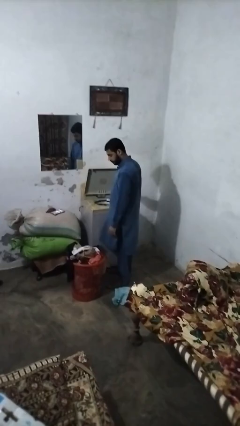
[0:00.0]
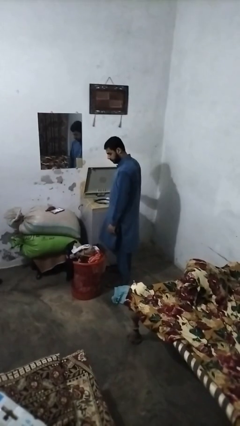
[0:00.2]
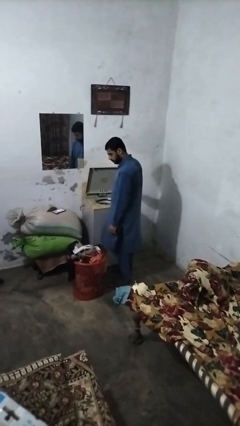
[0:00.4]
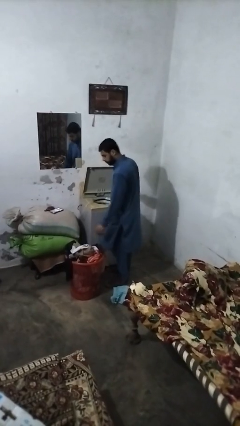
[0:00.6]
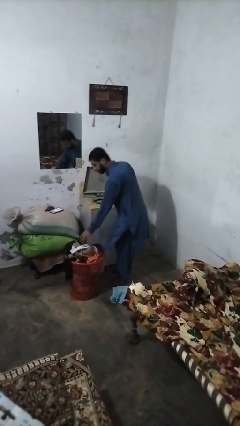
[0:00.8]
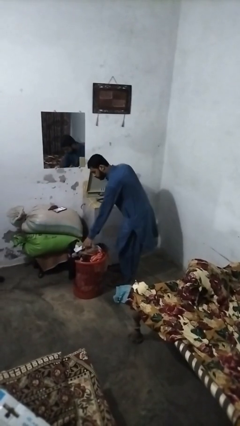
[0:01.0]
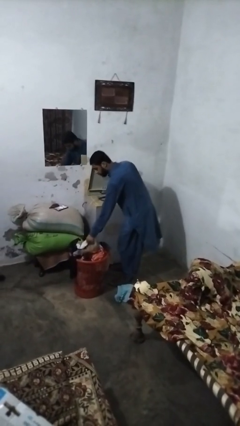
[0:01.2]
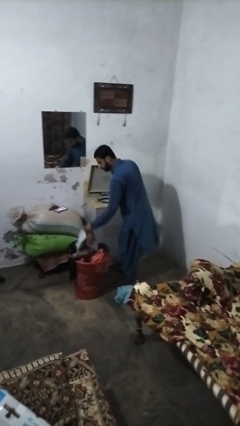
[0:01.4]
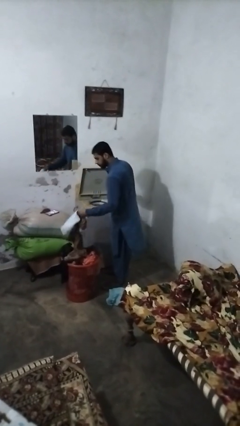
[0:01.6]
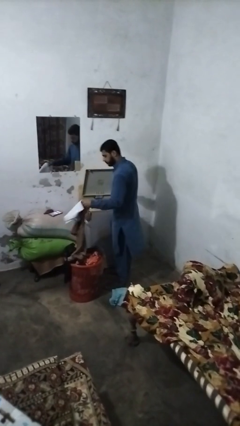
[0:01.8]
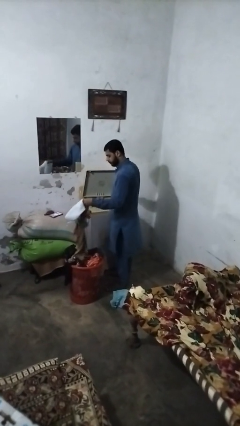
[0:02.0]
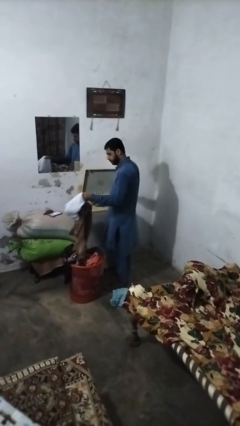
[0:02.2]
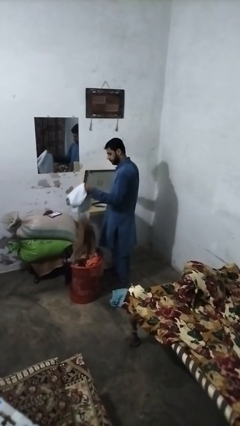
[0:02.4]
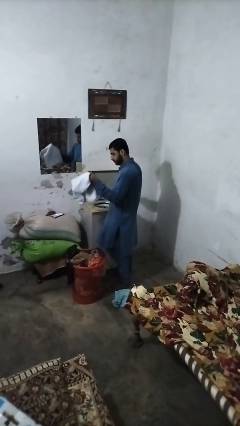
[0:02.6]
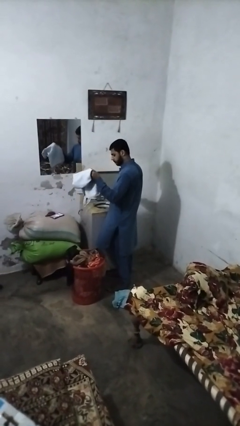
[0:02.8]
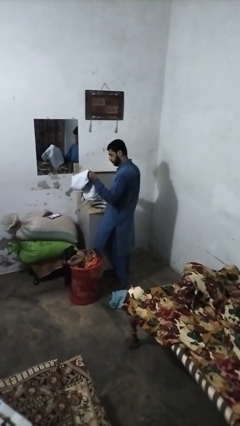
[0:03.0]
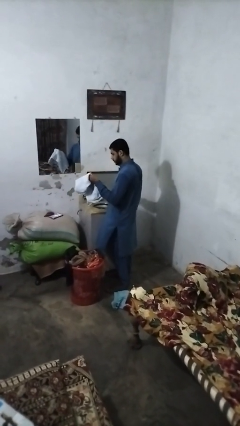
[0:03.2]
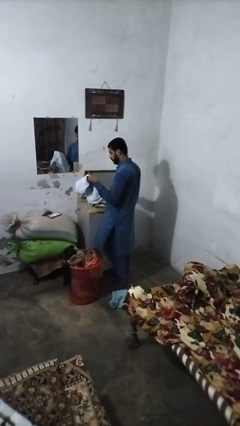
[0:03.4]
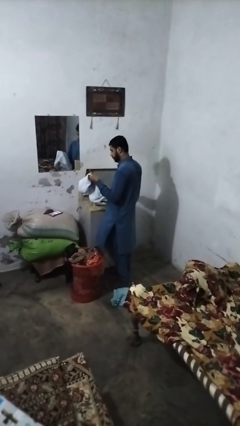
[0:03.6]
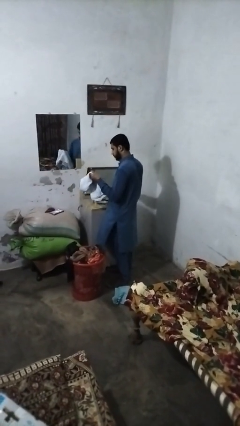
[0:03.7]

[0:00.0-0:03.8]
person unloads clotheswasher

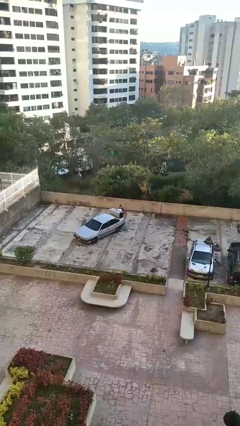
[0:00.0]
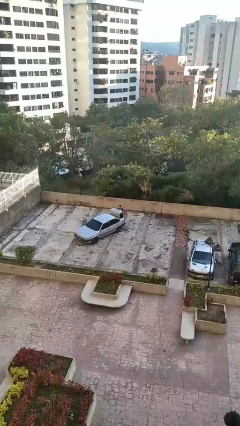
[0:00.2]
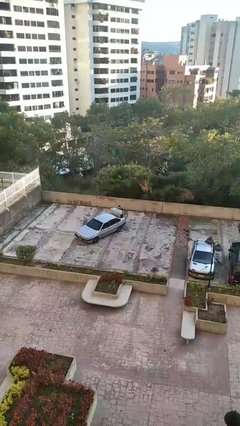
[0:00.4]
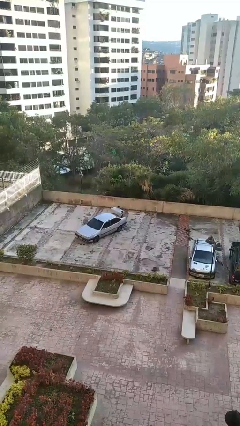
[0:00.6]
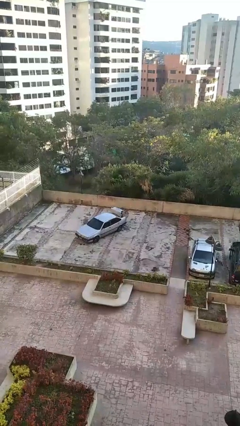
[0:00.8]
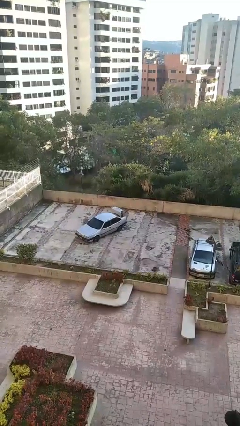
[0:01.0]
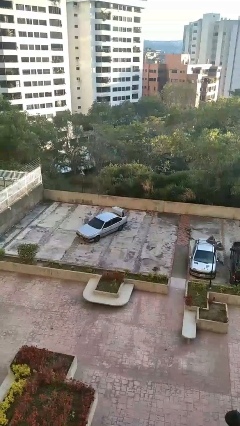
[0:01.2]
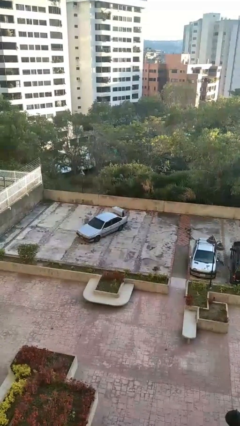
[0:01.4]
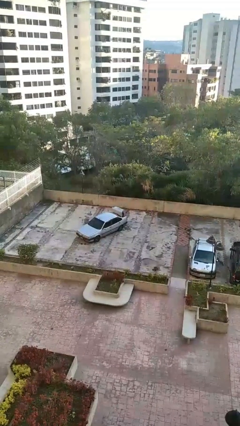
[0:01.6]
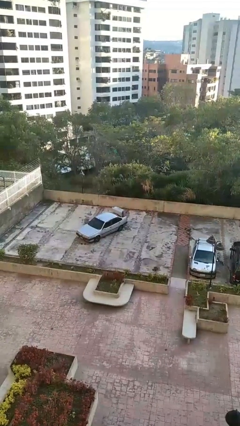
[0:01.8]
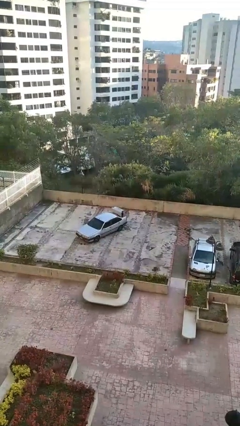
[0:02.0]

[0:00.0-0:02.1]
person loads car

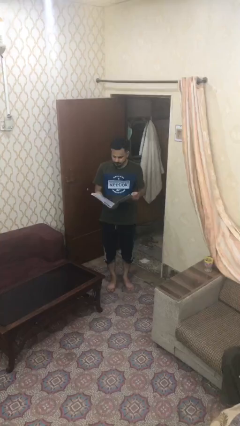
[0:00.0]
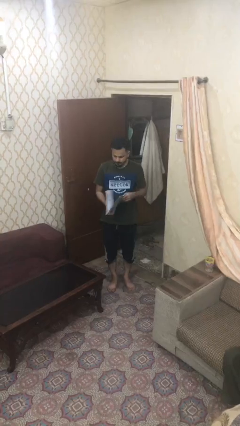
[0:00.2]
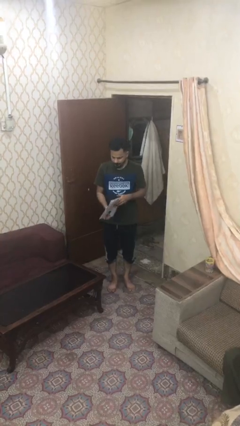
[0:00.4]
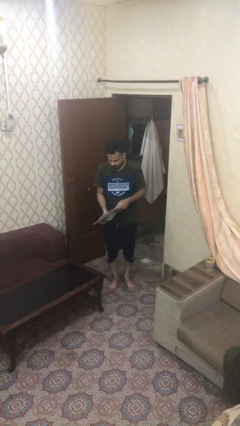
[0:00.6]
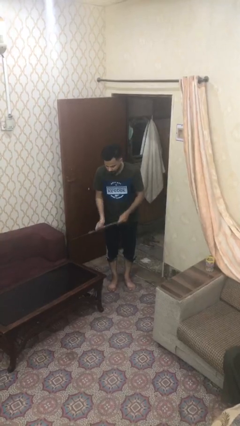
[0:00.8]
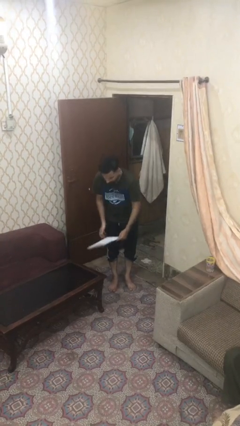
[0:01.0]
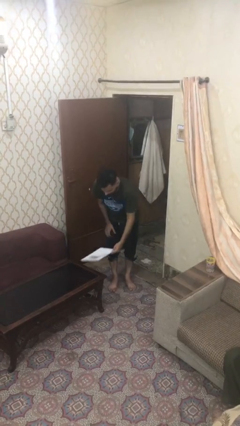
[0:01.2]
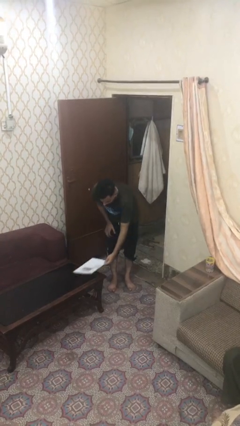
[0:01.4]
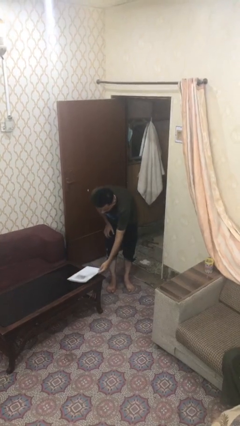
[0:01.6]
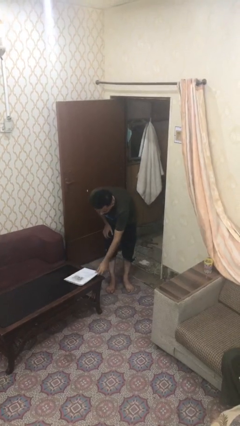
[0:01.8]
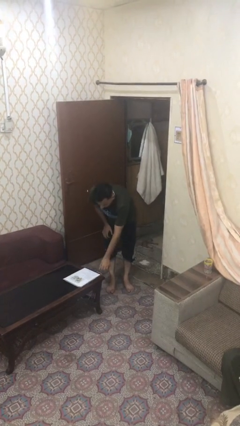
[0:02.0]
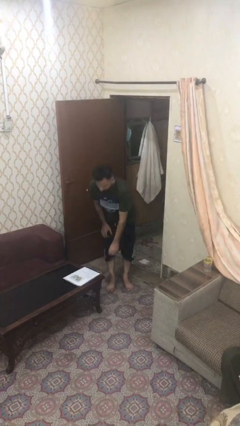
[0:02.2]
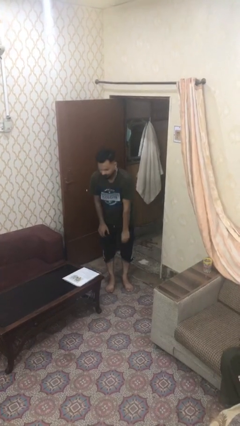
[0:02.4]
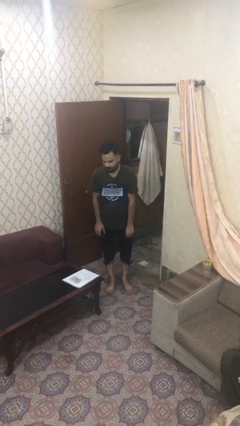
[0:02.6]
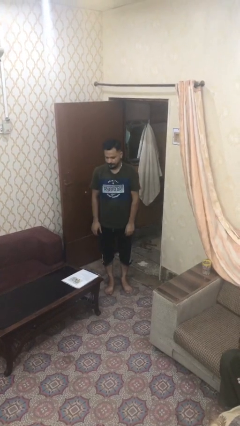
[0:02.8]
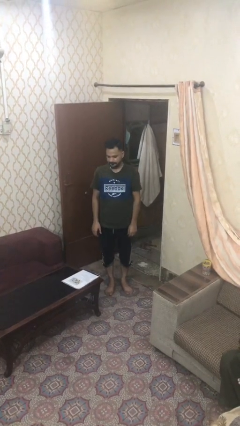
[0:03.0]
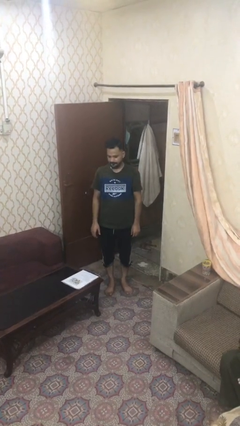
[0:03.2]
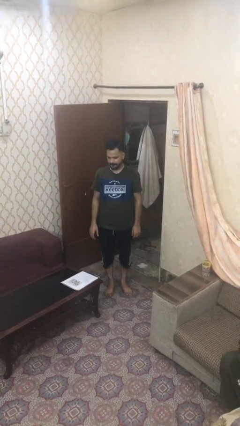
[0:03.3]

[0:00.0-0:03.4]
person puts down object on table

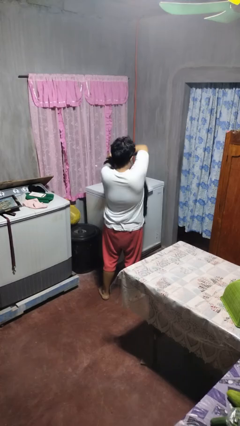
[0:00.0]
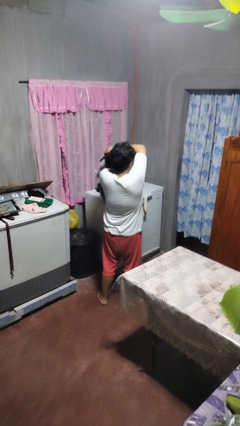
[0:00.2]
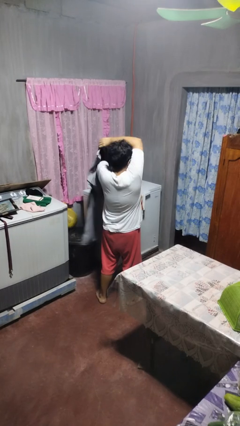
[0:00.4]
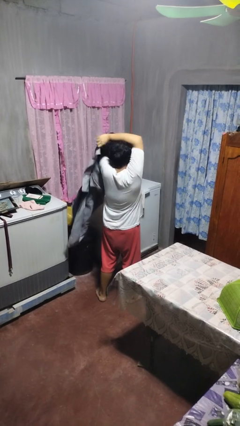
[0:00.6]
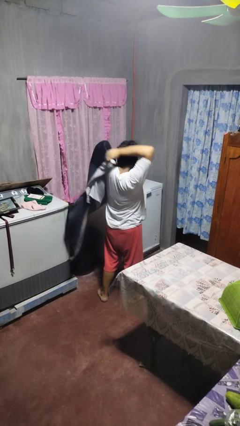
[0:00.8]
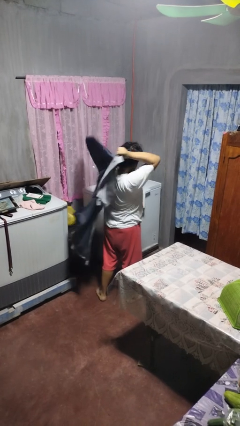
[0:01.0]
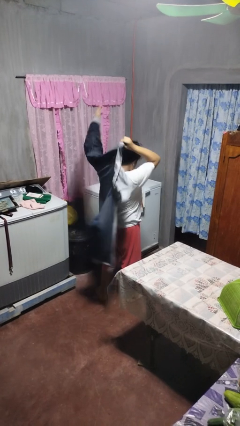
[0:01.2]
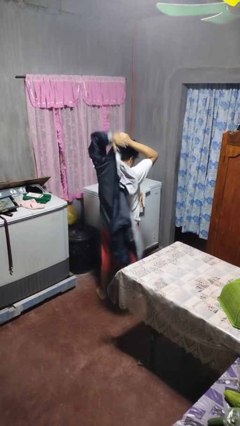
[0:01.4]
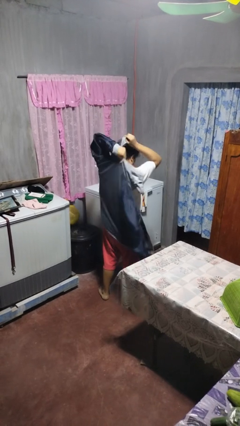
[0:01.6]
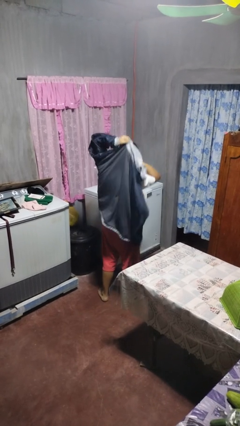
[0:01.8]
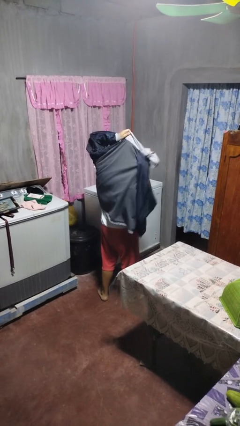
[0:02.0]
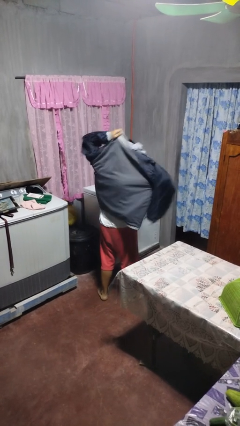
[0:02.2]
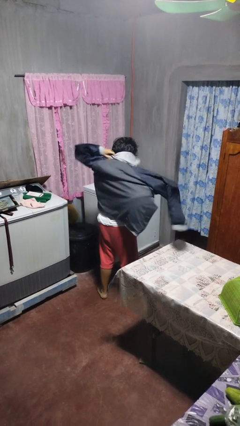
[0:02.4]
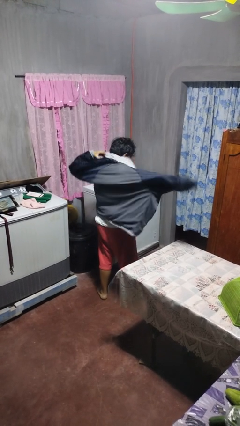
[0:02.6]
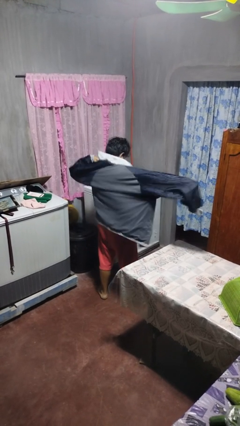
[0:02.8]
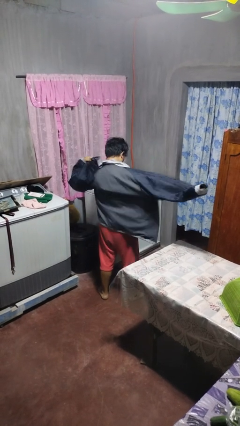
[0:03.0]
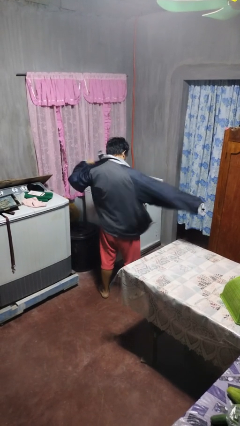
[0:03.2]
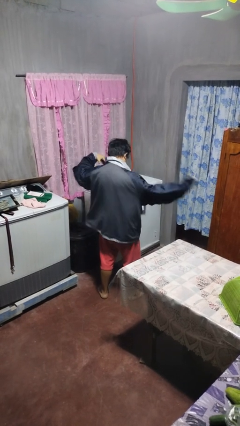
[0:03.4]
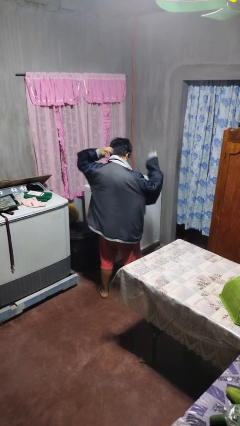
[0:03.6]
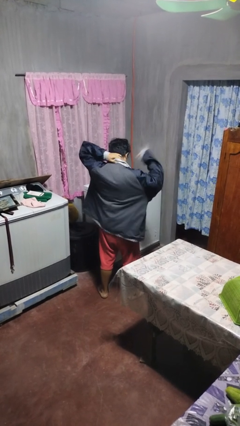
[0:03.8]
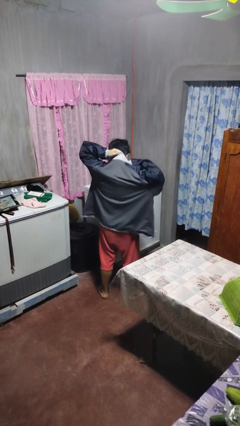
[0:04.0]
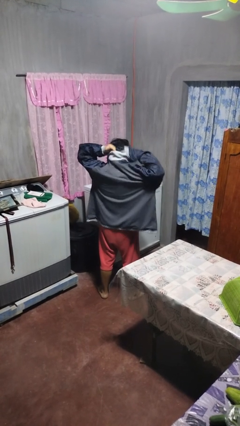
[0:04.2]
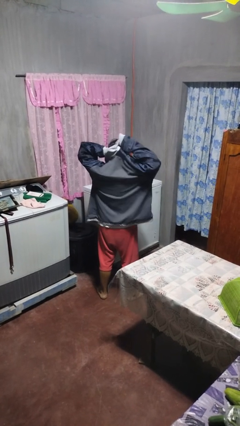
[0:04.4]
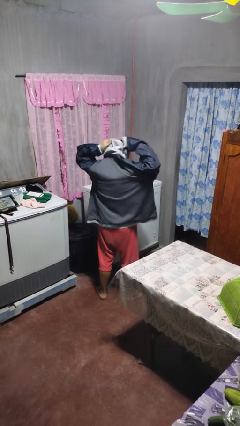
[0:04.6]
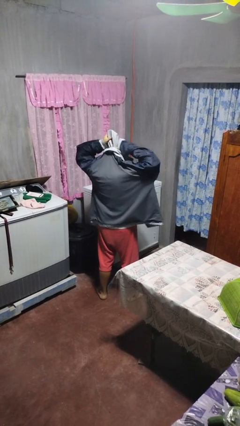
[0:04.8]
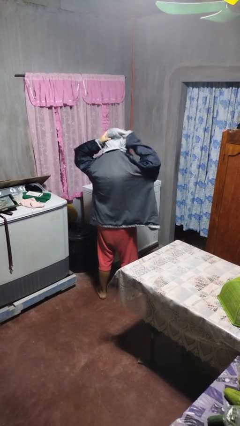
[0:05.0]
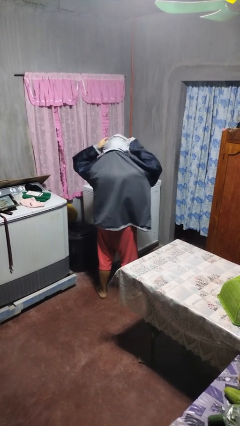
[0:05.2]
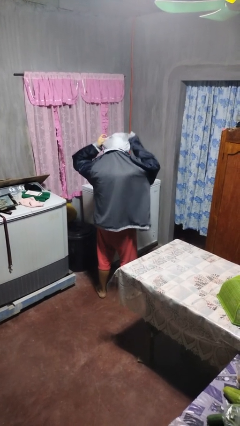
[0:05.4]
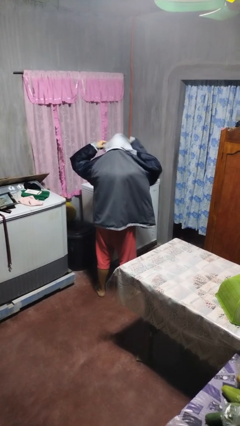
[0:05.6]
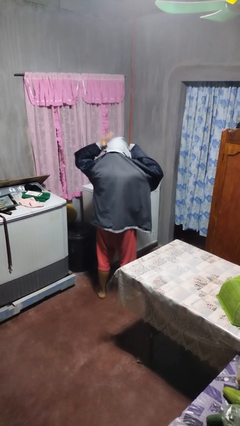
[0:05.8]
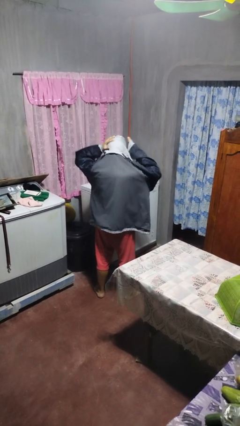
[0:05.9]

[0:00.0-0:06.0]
person puts on hoodie

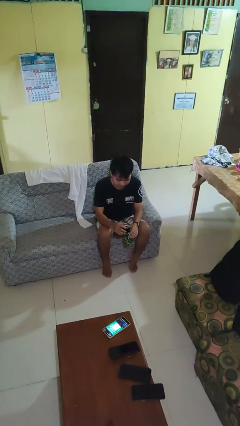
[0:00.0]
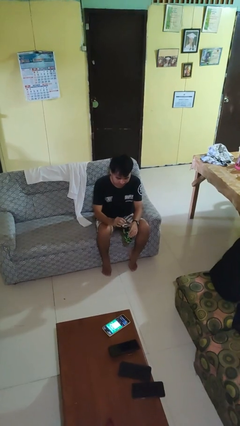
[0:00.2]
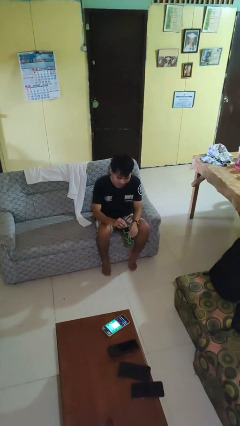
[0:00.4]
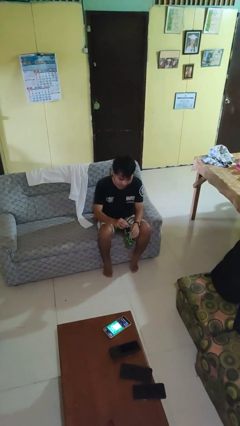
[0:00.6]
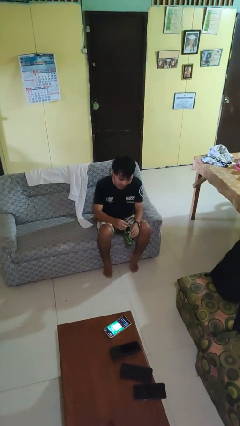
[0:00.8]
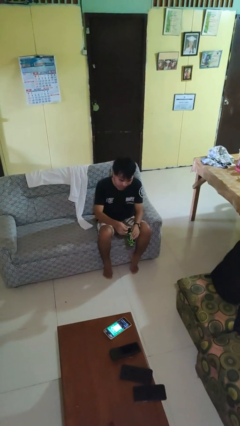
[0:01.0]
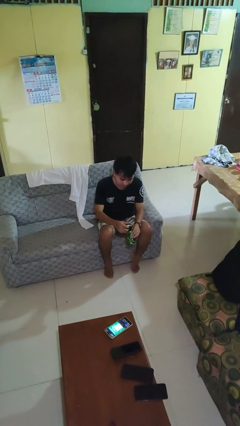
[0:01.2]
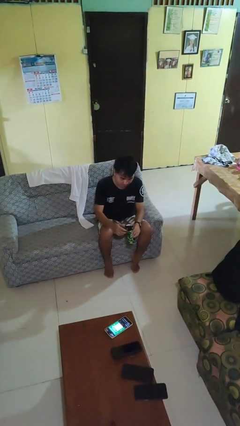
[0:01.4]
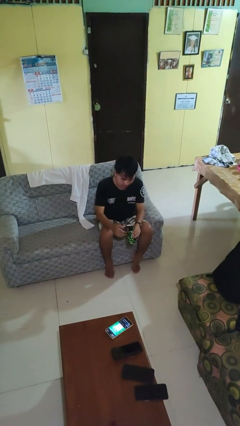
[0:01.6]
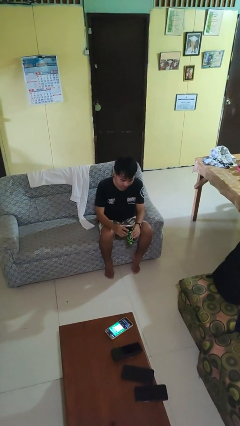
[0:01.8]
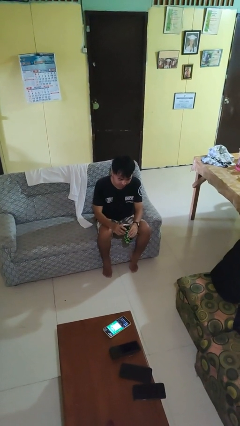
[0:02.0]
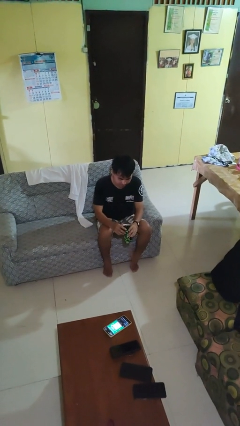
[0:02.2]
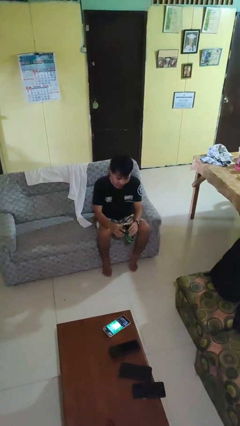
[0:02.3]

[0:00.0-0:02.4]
person opens beverage can
